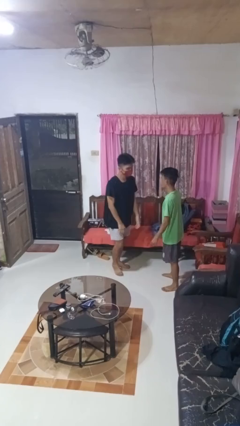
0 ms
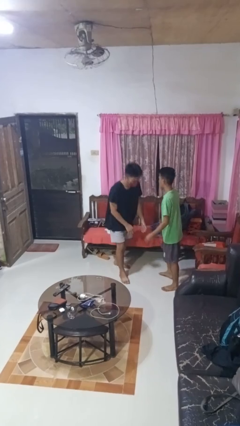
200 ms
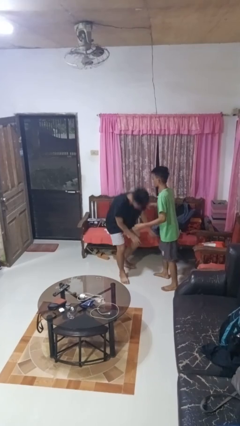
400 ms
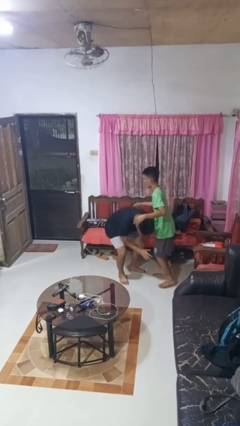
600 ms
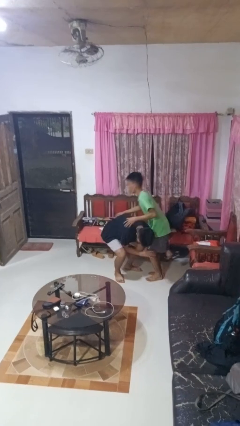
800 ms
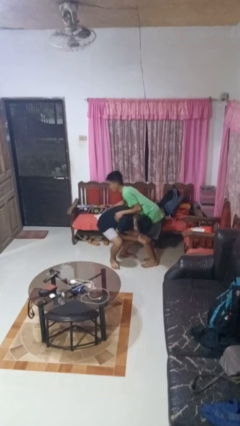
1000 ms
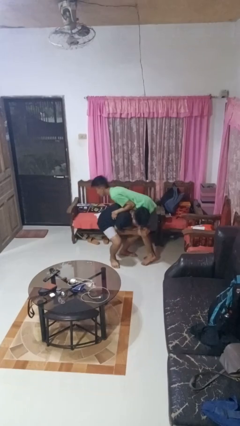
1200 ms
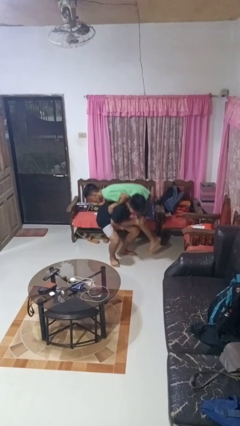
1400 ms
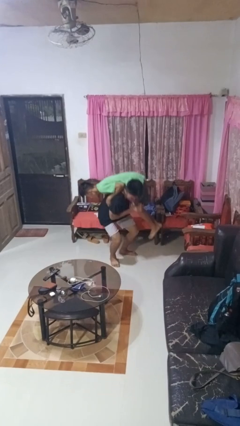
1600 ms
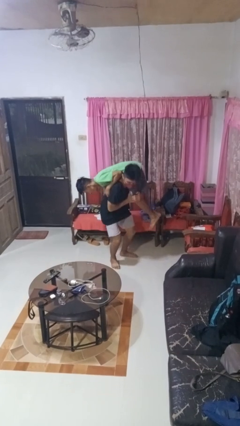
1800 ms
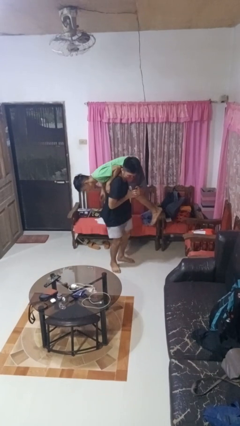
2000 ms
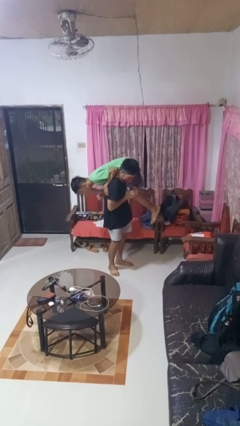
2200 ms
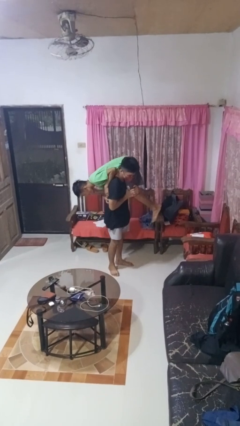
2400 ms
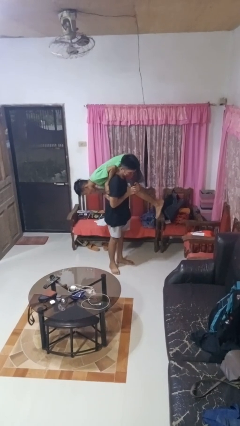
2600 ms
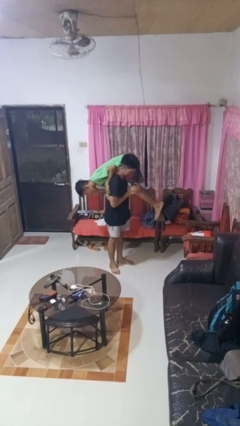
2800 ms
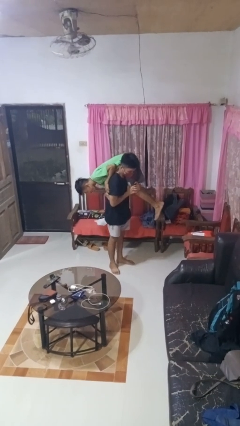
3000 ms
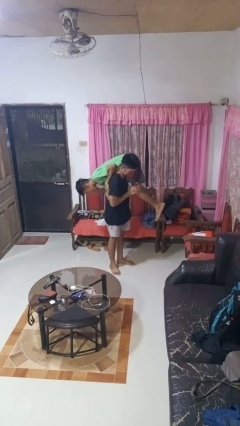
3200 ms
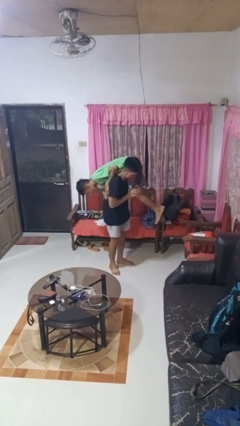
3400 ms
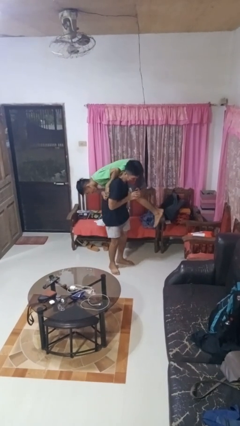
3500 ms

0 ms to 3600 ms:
person carries person over shoulder

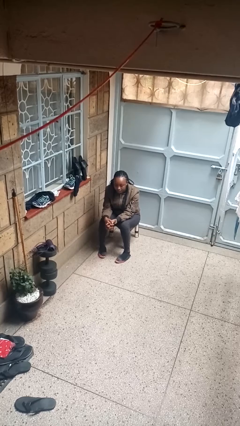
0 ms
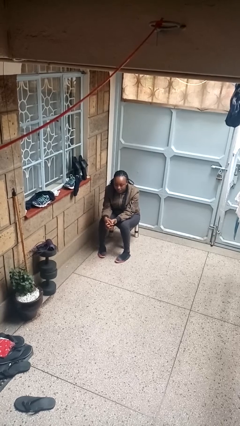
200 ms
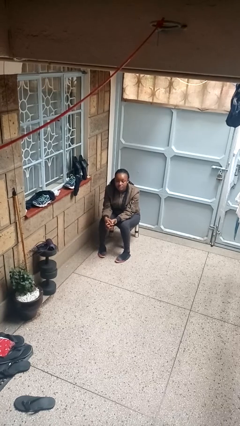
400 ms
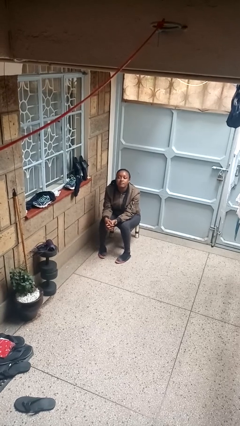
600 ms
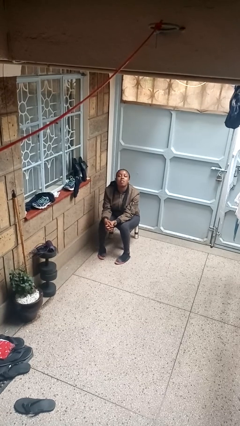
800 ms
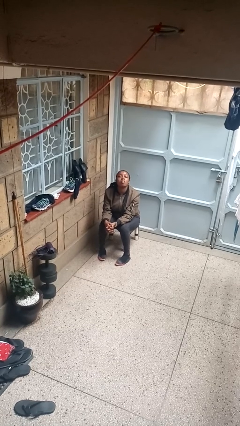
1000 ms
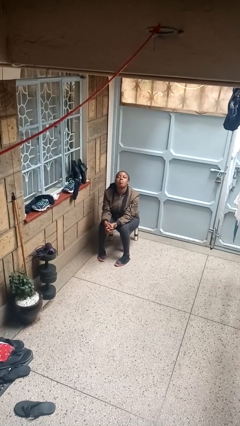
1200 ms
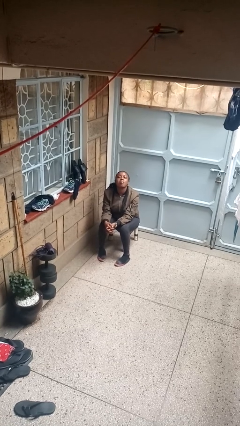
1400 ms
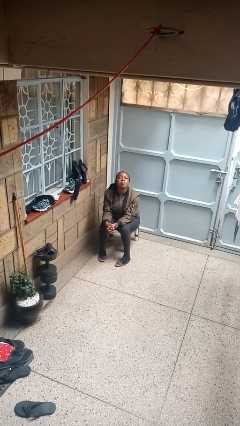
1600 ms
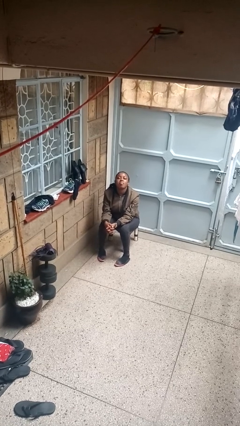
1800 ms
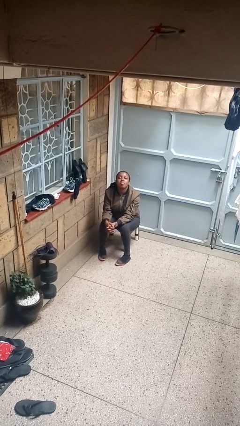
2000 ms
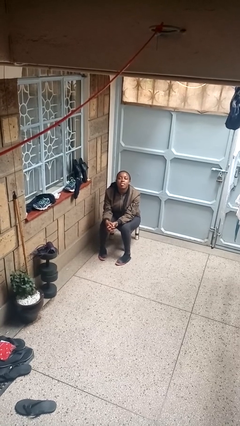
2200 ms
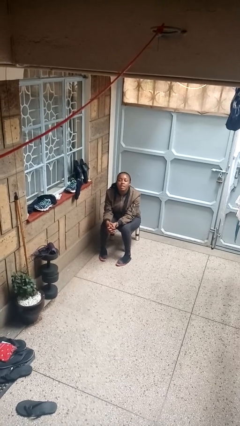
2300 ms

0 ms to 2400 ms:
person sticks out tongue

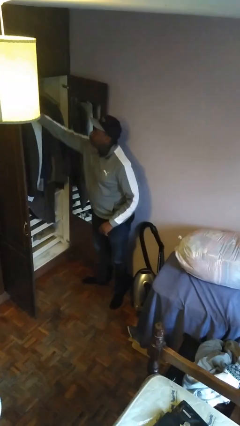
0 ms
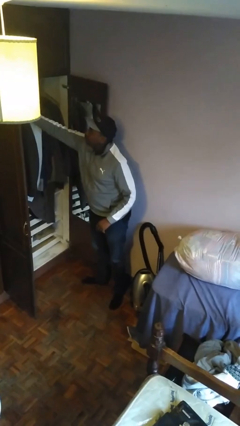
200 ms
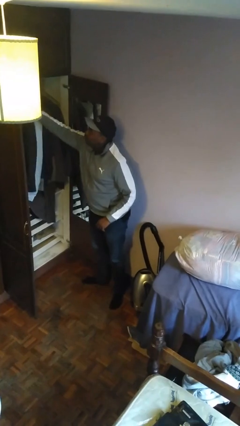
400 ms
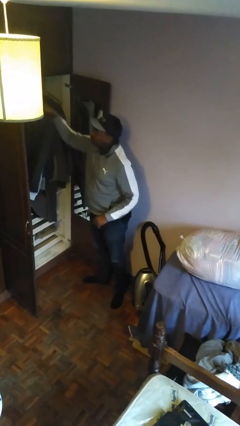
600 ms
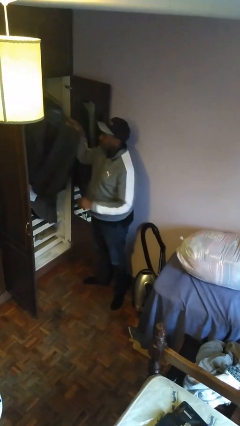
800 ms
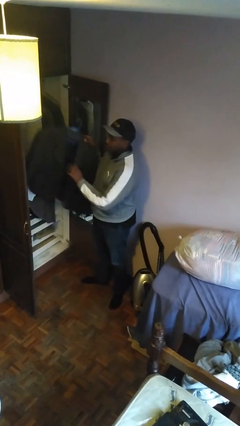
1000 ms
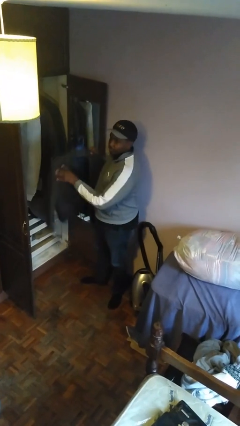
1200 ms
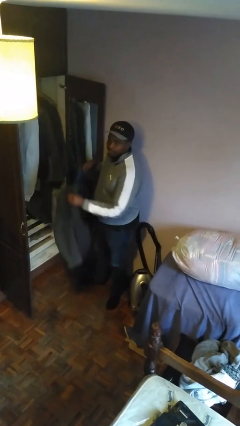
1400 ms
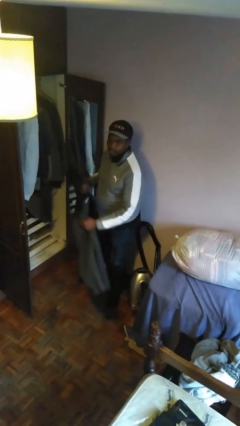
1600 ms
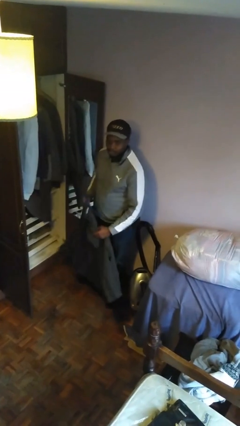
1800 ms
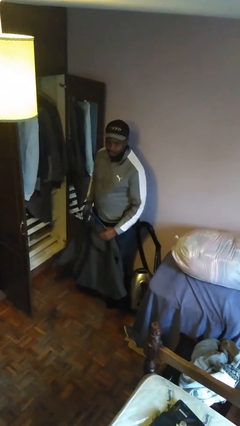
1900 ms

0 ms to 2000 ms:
person takes clothes from closet

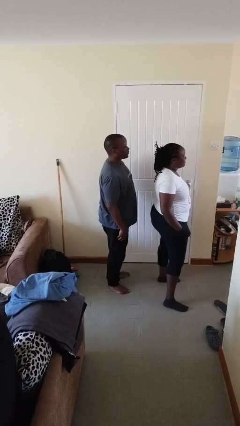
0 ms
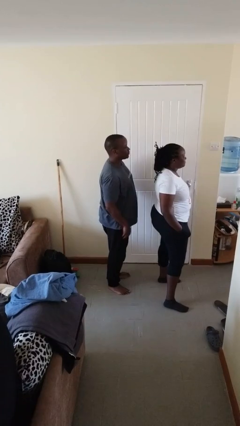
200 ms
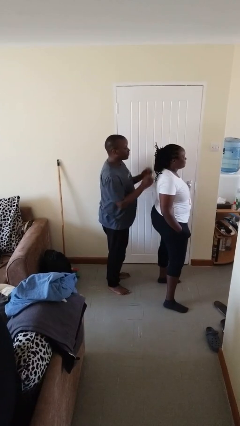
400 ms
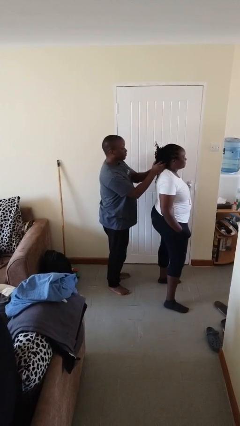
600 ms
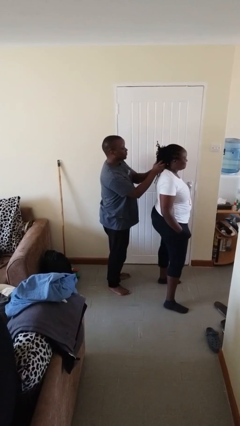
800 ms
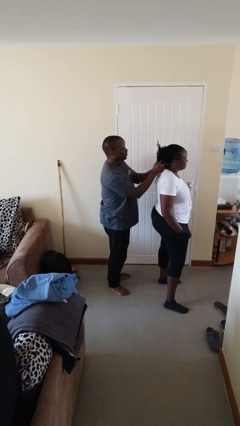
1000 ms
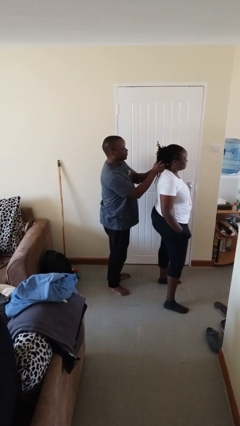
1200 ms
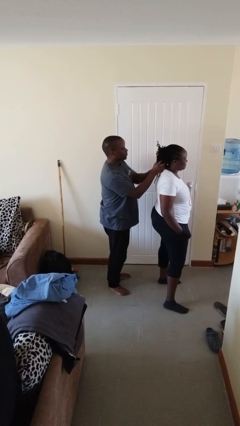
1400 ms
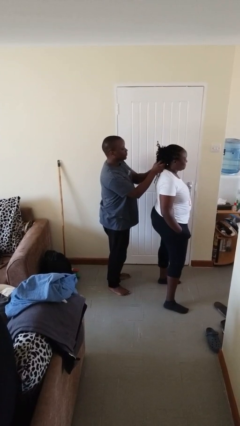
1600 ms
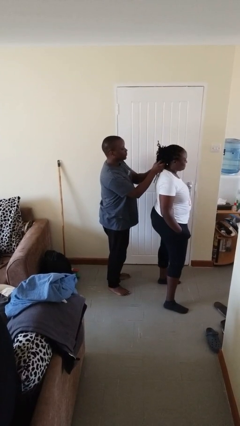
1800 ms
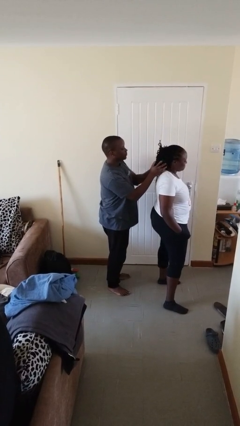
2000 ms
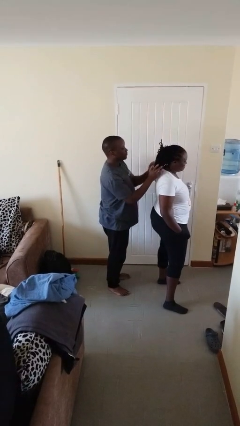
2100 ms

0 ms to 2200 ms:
person grabs person by hair

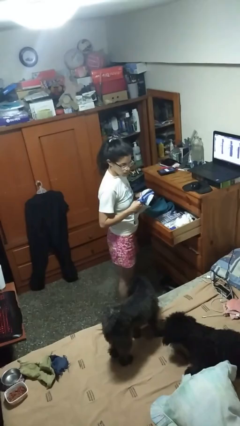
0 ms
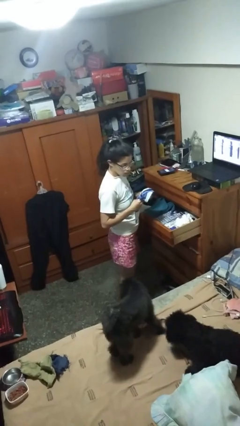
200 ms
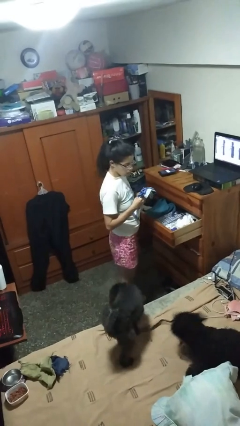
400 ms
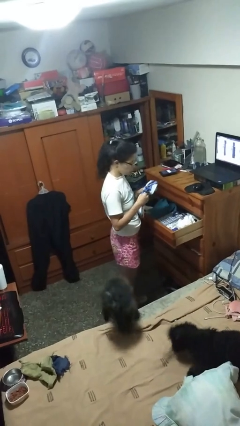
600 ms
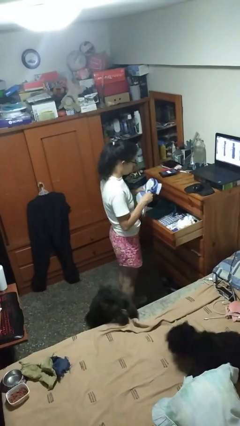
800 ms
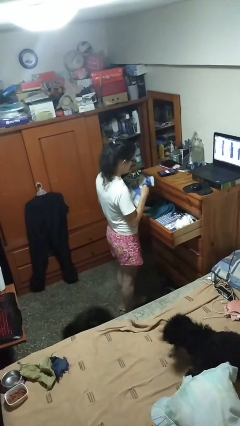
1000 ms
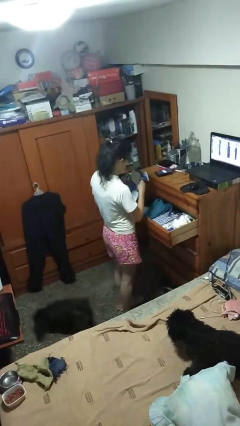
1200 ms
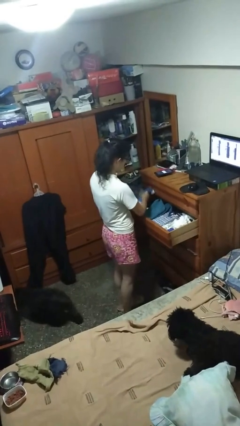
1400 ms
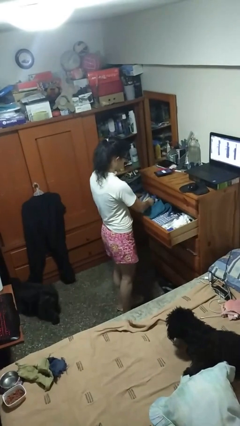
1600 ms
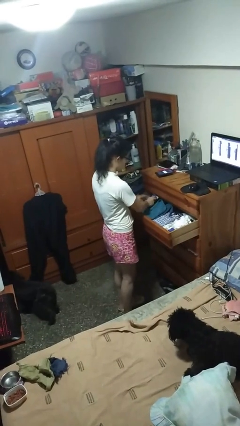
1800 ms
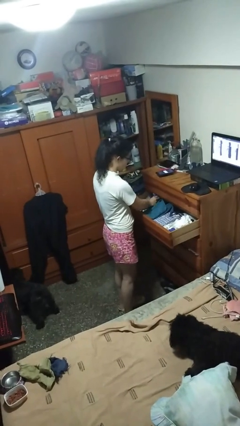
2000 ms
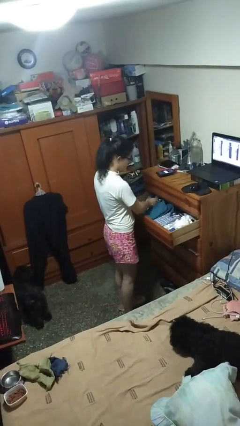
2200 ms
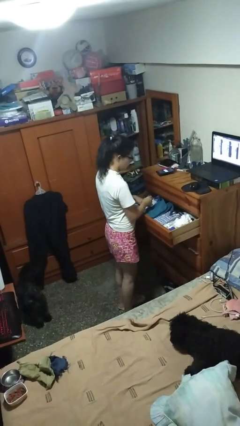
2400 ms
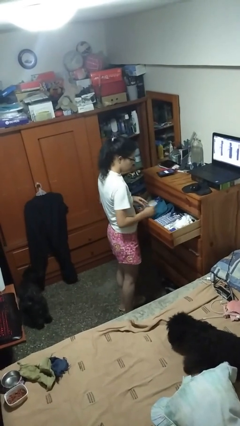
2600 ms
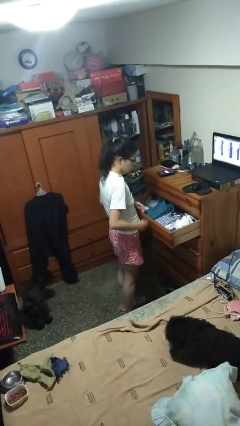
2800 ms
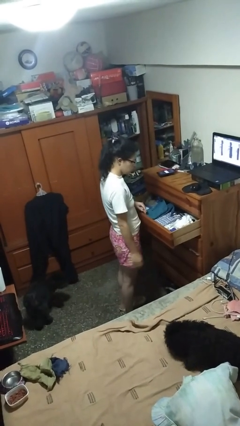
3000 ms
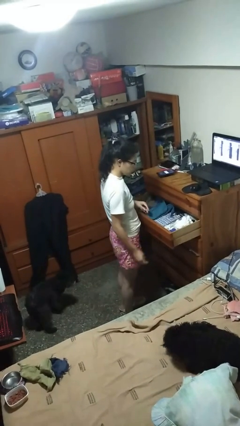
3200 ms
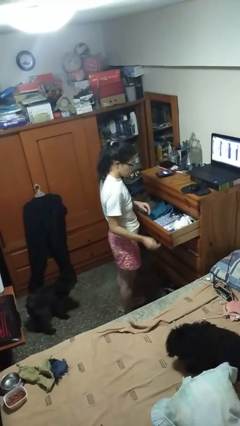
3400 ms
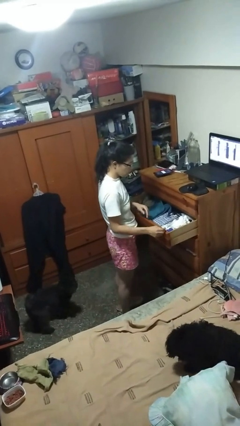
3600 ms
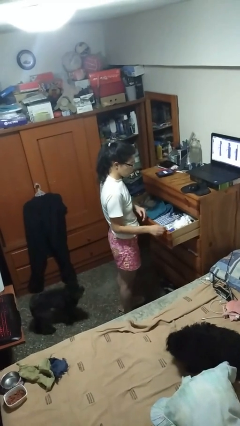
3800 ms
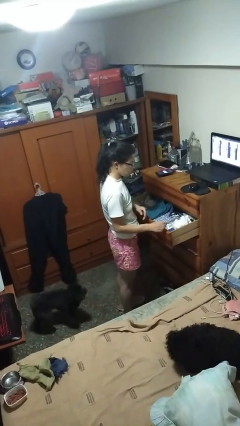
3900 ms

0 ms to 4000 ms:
person puts clothes into dresser

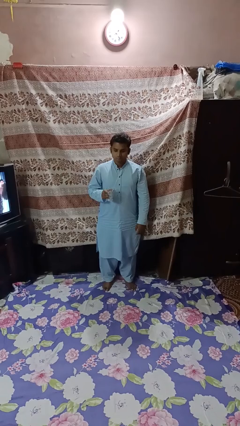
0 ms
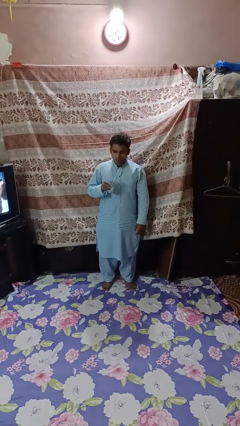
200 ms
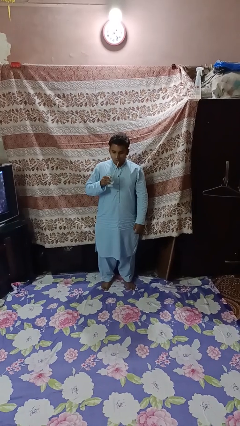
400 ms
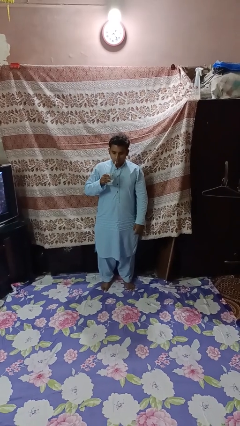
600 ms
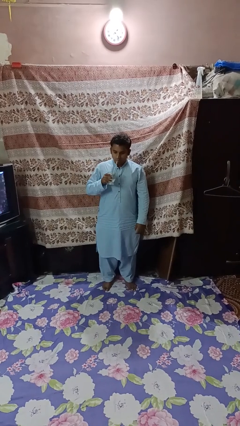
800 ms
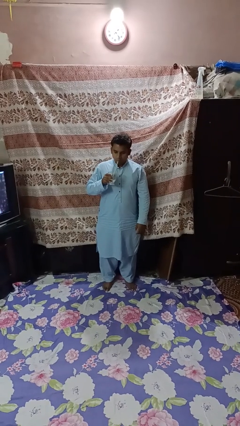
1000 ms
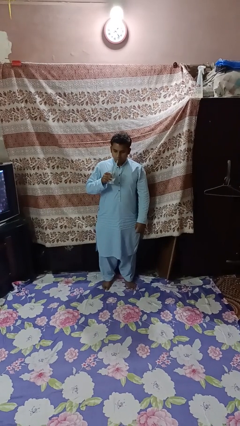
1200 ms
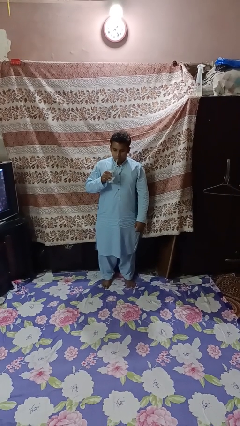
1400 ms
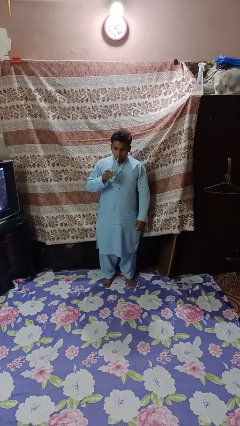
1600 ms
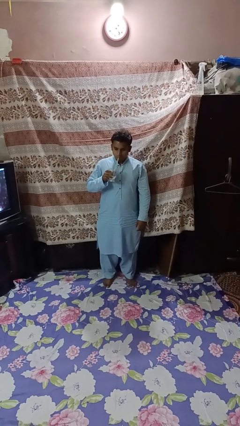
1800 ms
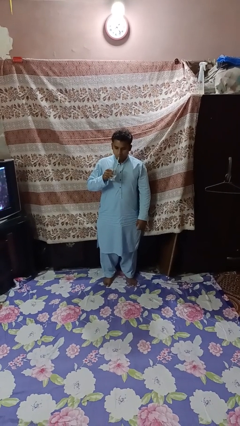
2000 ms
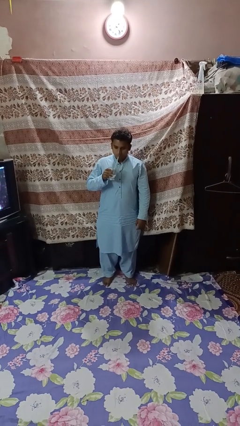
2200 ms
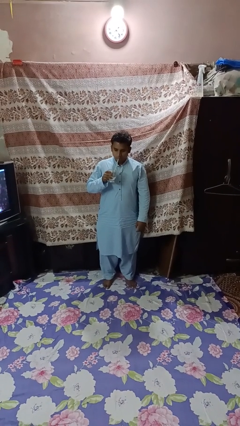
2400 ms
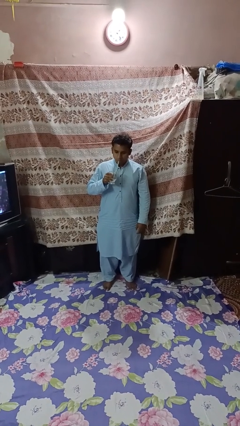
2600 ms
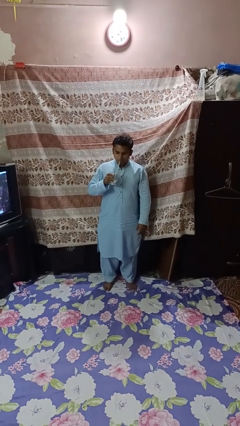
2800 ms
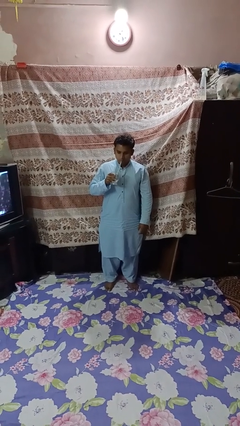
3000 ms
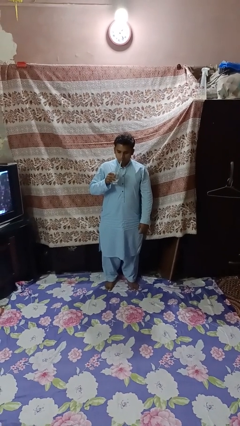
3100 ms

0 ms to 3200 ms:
person drinks from straw
